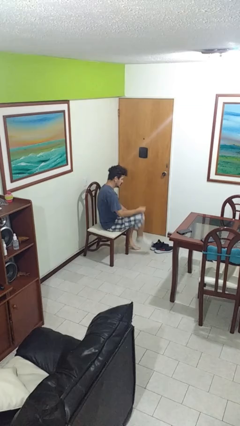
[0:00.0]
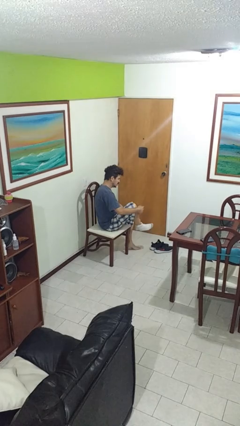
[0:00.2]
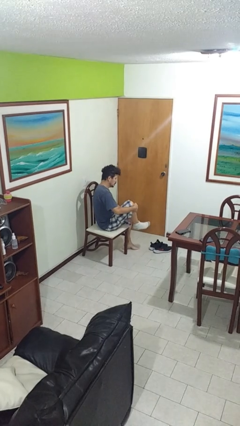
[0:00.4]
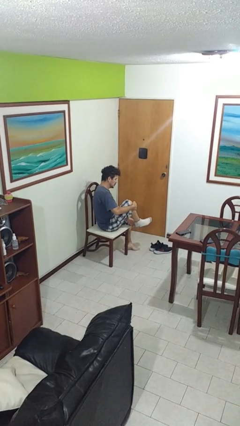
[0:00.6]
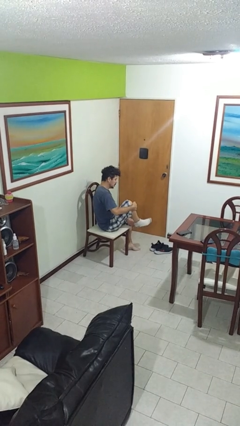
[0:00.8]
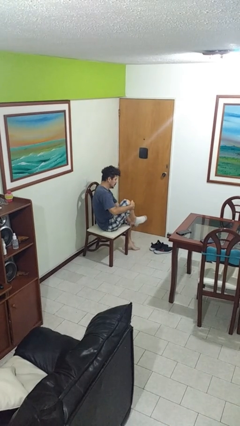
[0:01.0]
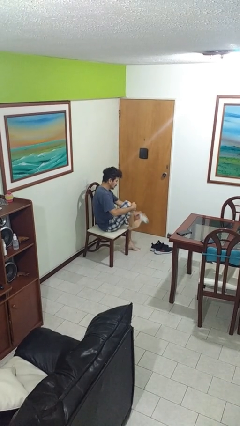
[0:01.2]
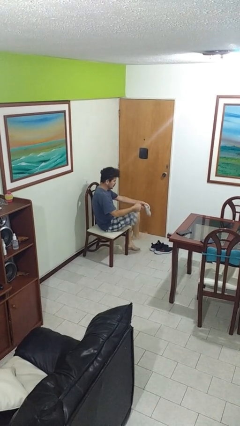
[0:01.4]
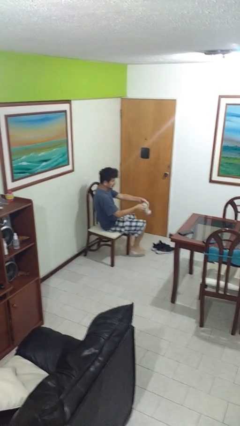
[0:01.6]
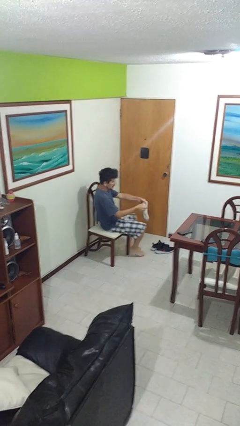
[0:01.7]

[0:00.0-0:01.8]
person takes off socks

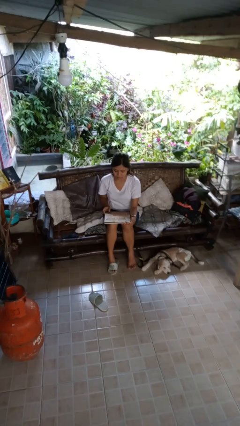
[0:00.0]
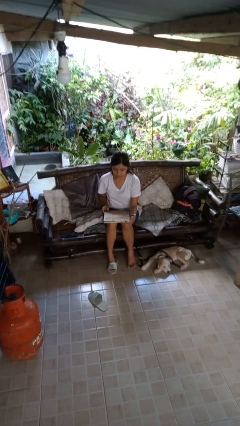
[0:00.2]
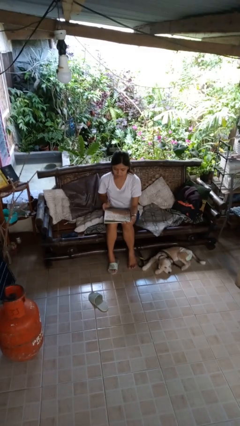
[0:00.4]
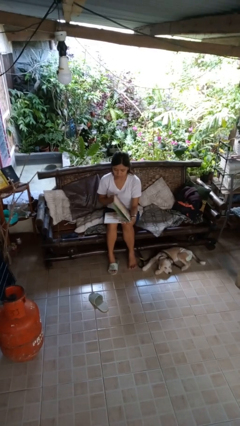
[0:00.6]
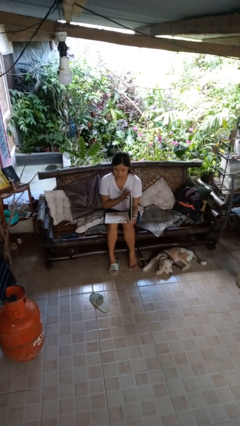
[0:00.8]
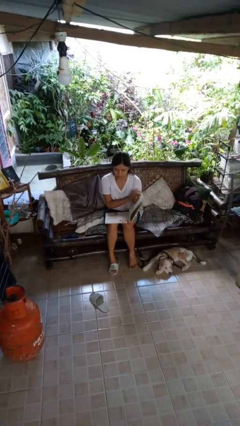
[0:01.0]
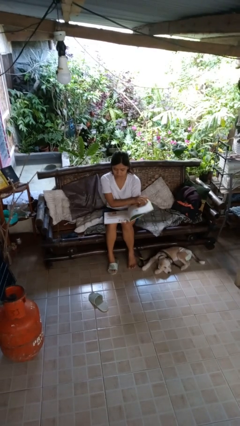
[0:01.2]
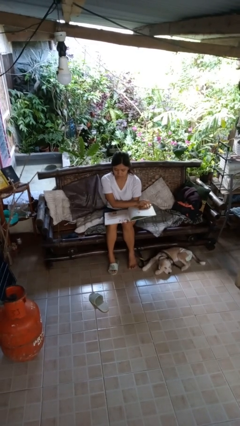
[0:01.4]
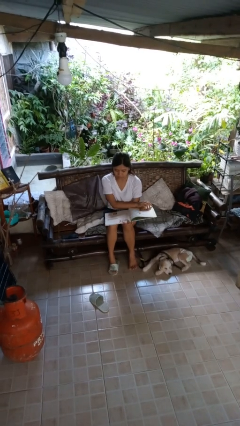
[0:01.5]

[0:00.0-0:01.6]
person reads book

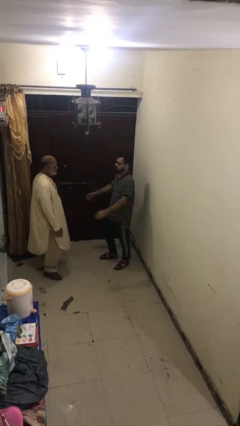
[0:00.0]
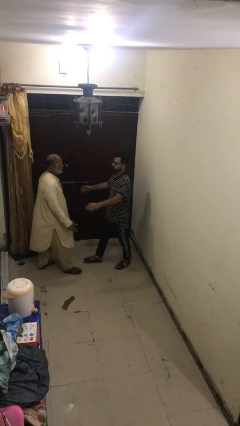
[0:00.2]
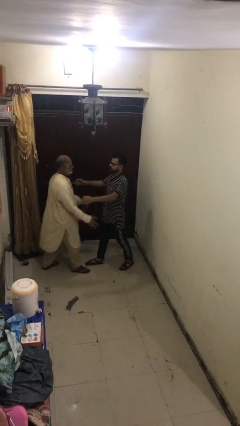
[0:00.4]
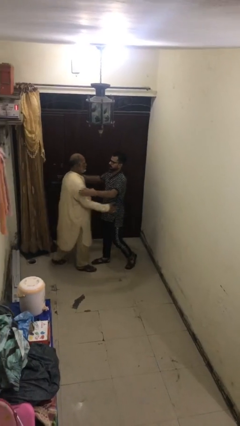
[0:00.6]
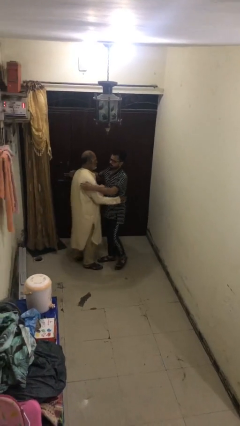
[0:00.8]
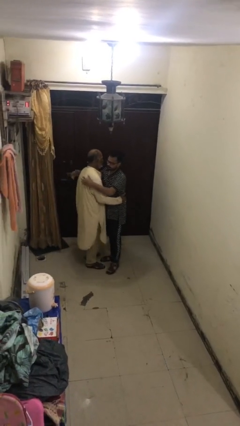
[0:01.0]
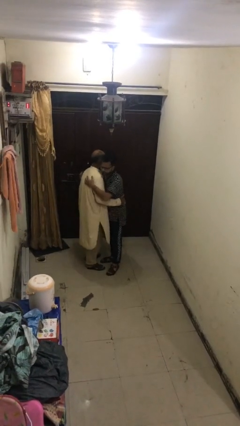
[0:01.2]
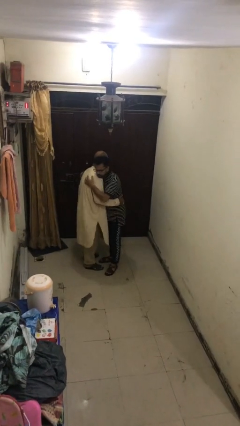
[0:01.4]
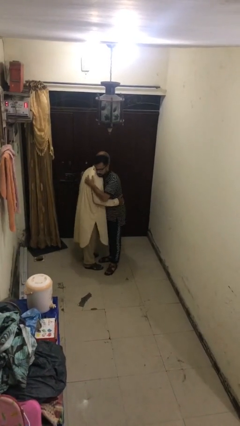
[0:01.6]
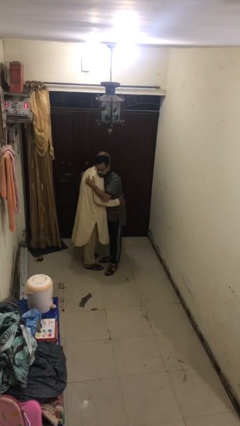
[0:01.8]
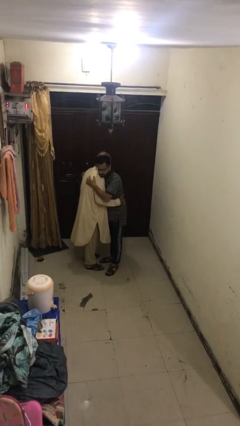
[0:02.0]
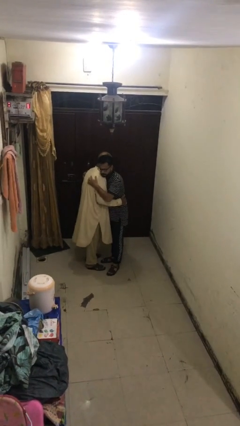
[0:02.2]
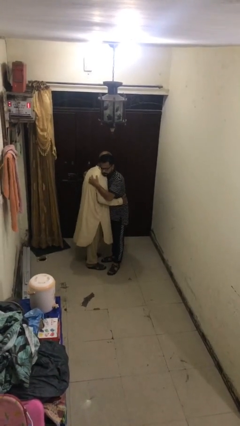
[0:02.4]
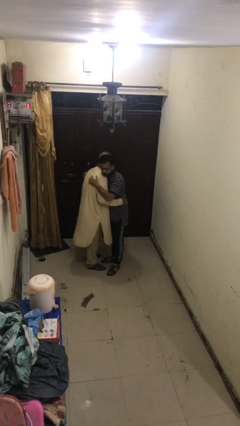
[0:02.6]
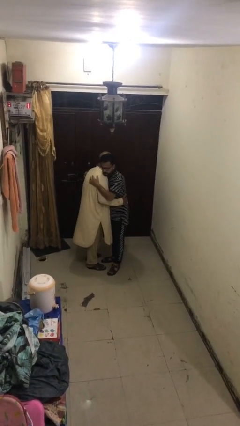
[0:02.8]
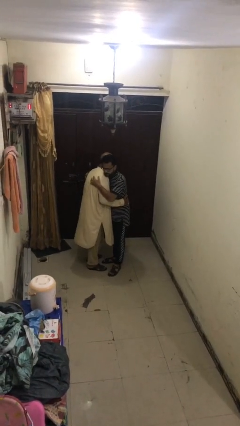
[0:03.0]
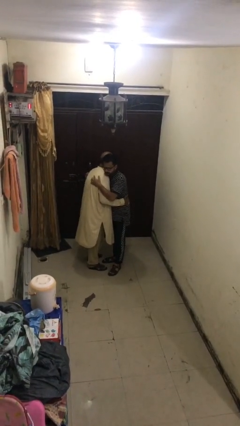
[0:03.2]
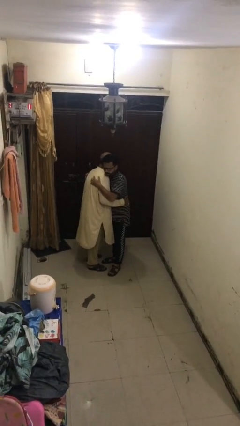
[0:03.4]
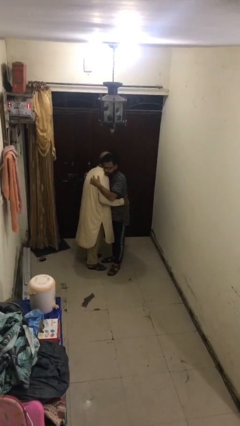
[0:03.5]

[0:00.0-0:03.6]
person embraces person

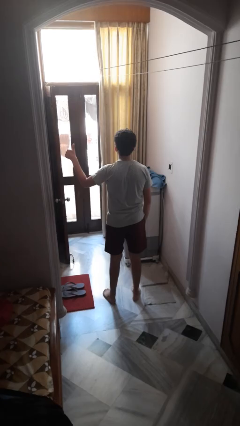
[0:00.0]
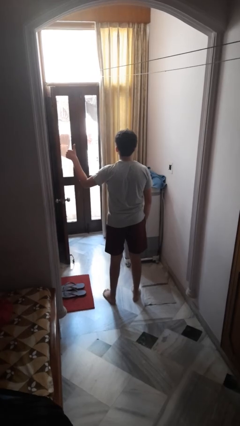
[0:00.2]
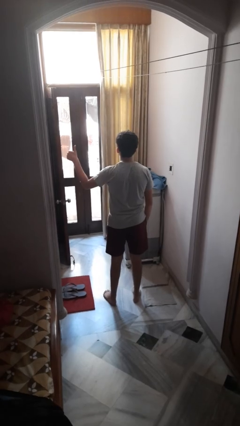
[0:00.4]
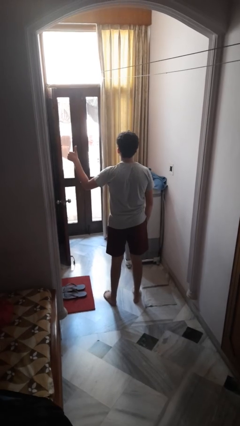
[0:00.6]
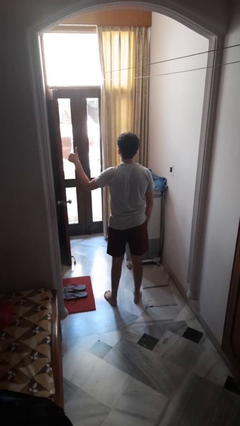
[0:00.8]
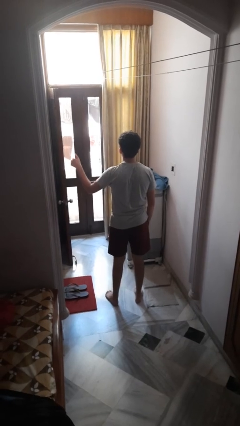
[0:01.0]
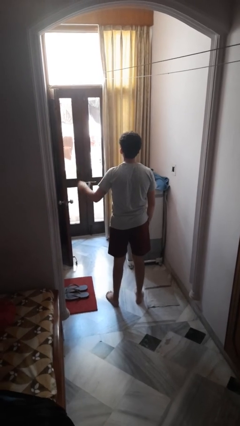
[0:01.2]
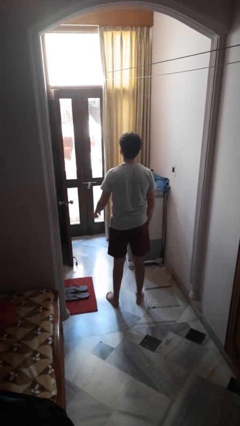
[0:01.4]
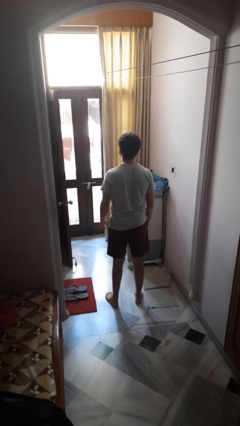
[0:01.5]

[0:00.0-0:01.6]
person gestures thumbs up

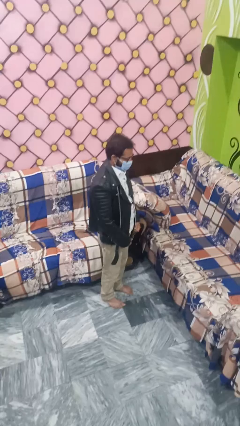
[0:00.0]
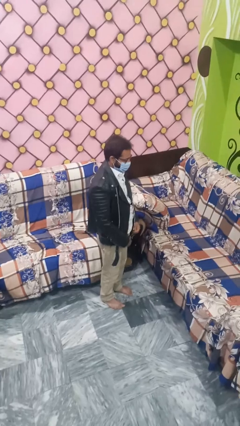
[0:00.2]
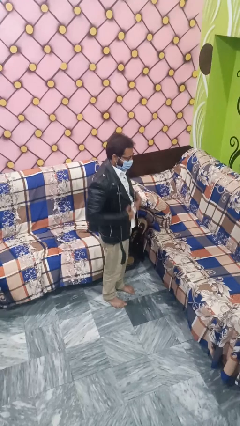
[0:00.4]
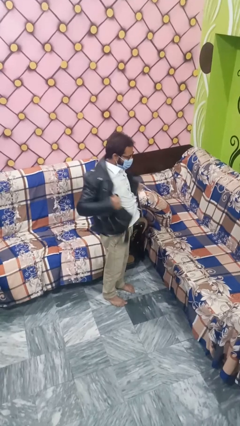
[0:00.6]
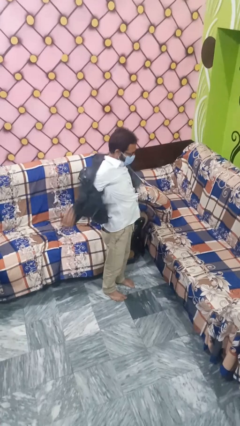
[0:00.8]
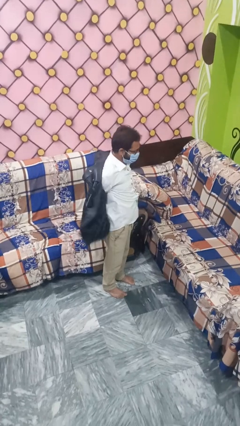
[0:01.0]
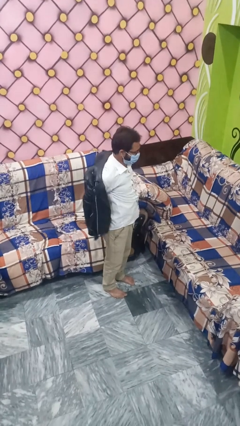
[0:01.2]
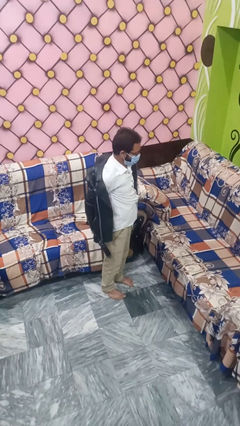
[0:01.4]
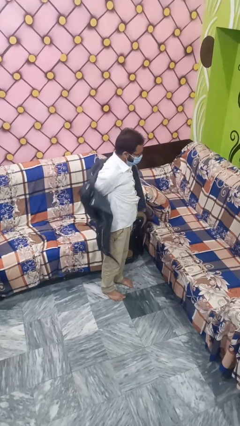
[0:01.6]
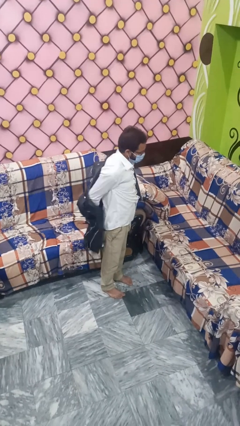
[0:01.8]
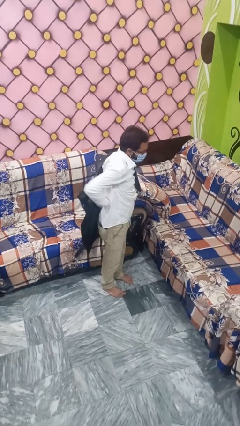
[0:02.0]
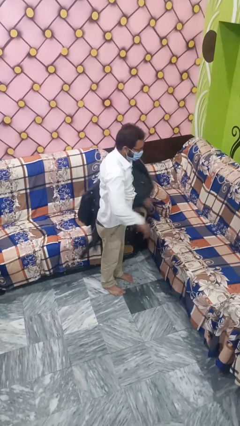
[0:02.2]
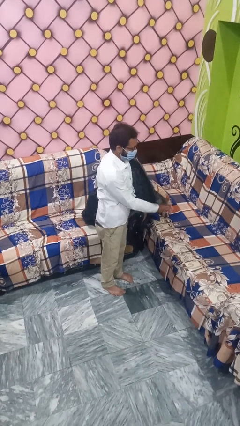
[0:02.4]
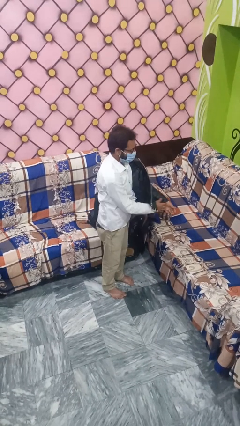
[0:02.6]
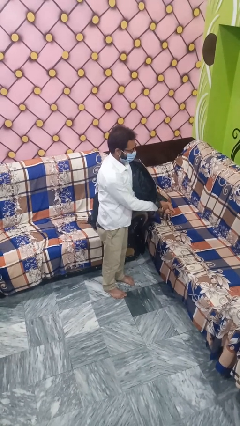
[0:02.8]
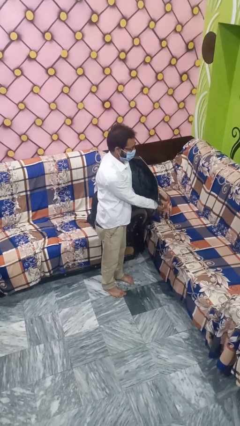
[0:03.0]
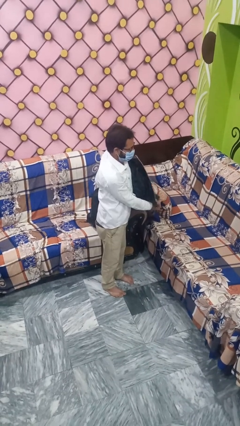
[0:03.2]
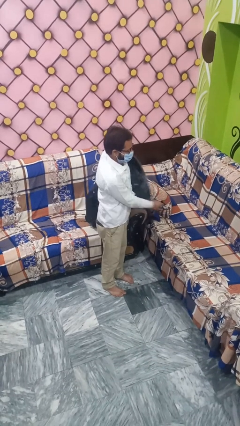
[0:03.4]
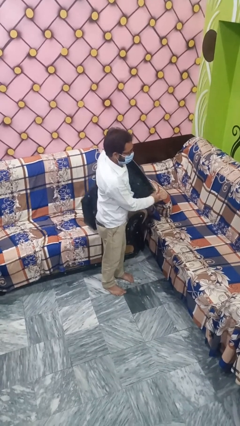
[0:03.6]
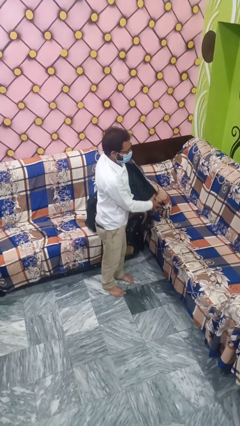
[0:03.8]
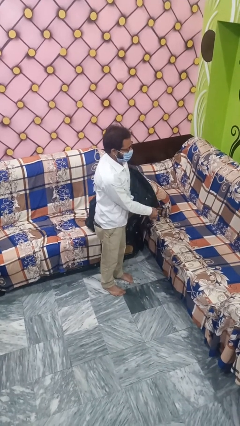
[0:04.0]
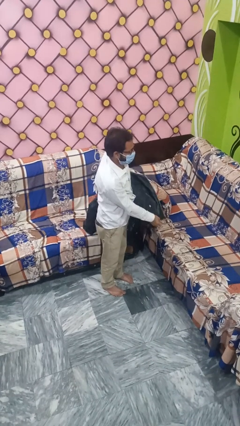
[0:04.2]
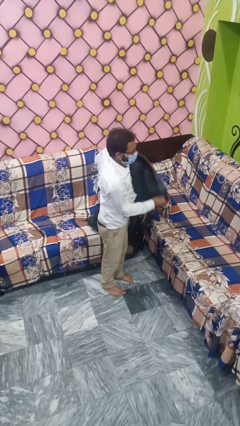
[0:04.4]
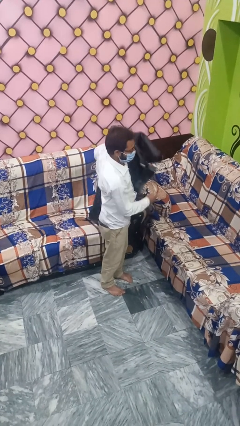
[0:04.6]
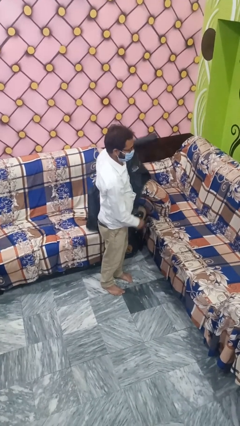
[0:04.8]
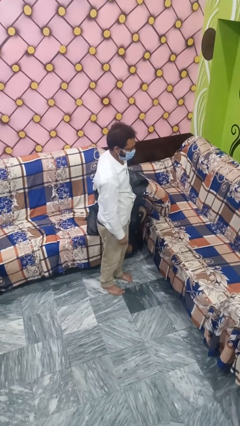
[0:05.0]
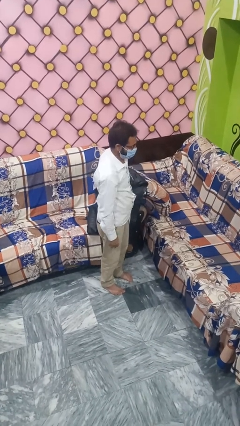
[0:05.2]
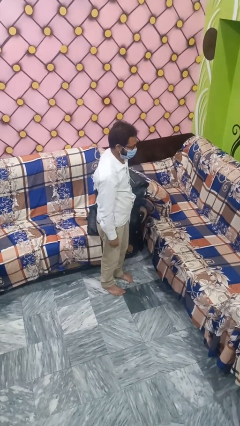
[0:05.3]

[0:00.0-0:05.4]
person takes off jacket

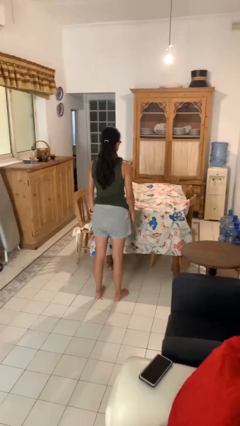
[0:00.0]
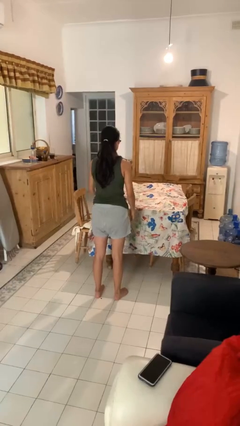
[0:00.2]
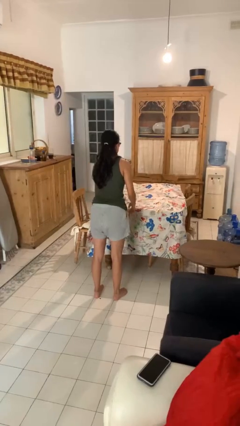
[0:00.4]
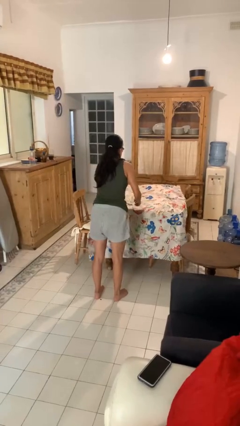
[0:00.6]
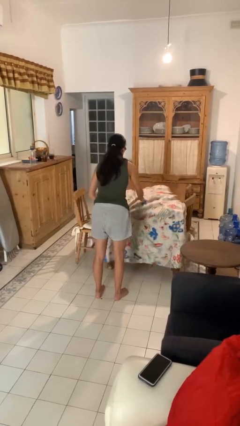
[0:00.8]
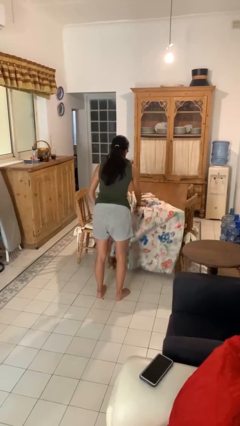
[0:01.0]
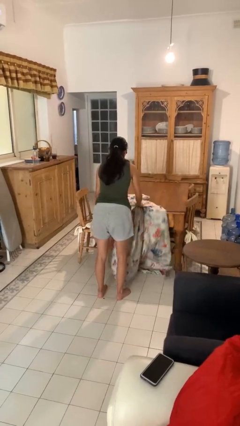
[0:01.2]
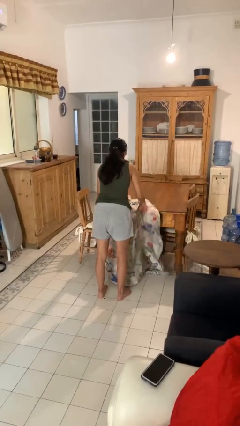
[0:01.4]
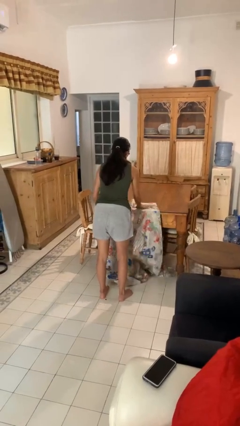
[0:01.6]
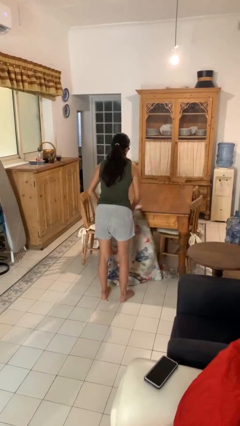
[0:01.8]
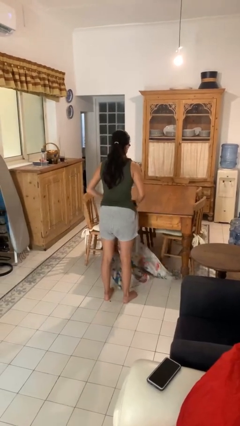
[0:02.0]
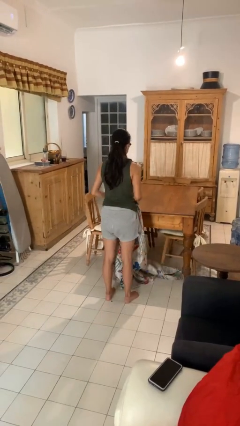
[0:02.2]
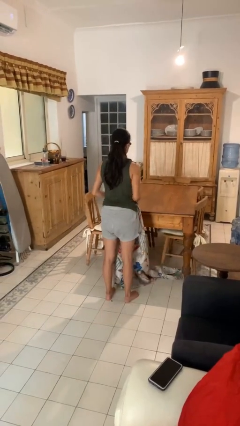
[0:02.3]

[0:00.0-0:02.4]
person folds tablecloth

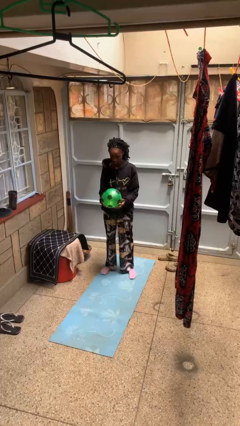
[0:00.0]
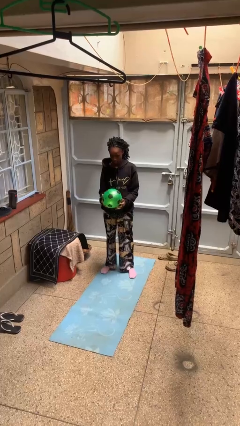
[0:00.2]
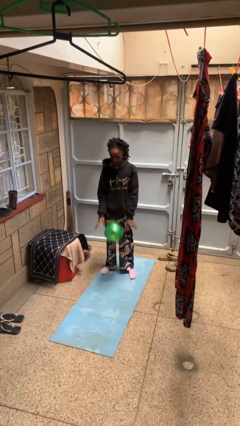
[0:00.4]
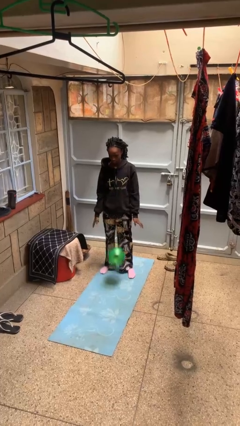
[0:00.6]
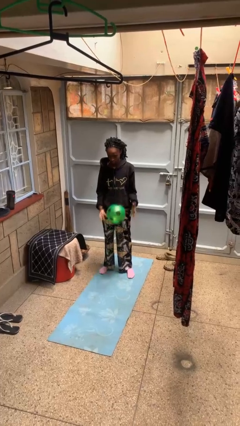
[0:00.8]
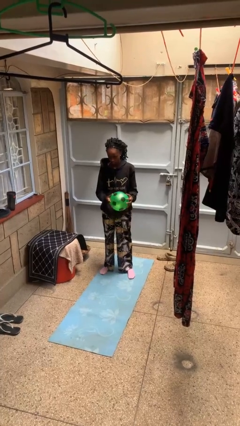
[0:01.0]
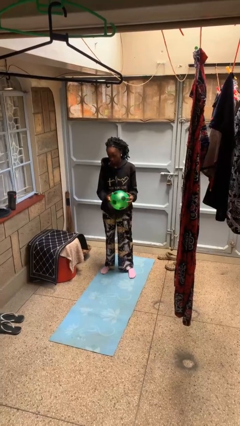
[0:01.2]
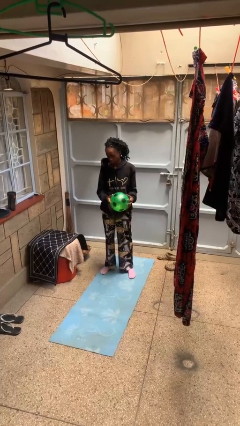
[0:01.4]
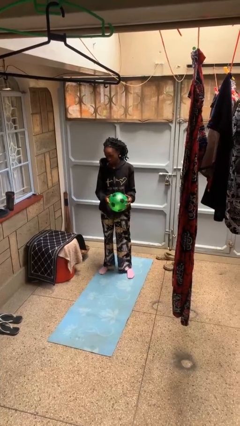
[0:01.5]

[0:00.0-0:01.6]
person bounces ball on floor
